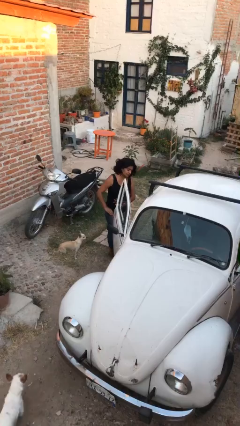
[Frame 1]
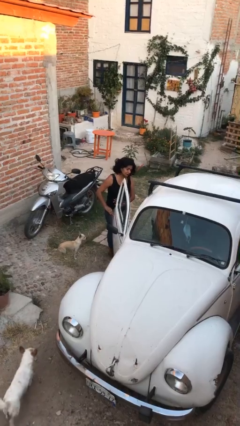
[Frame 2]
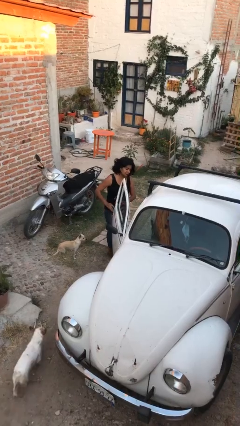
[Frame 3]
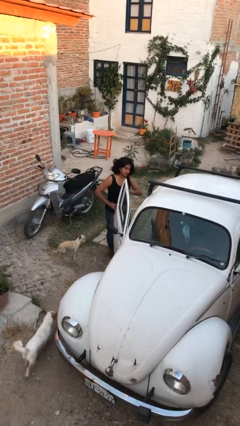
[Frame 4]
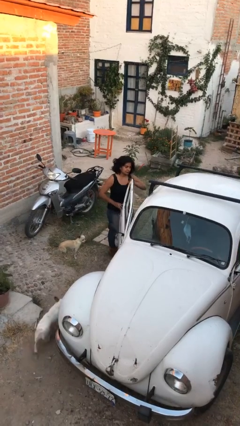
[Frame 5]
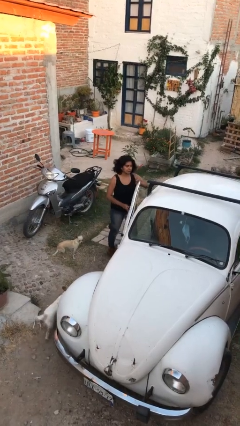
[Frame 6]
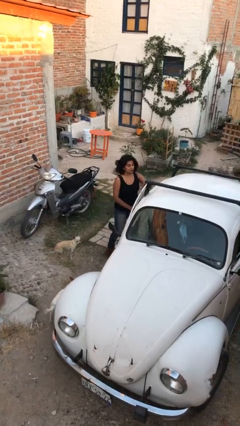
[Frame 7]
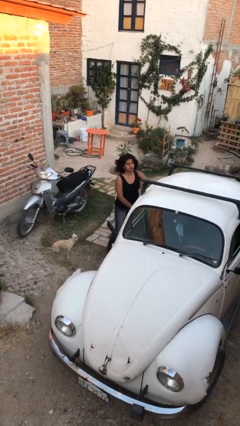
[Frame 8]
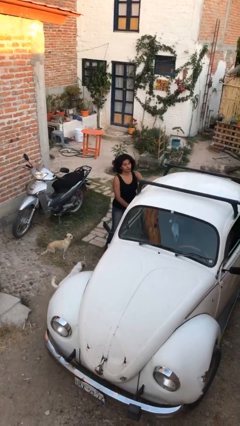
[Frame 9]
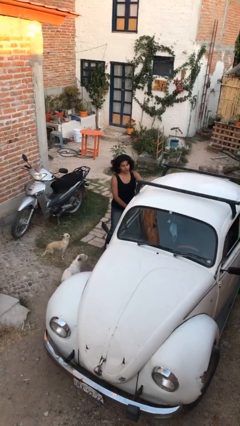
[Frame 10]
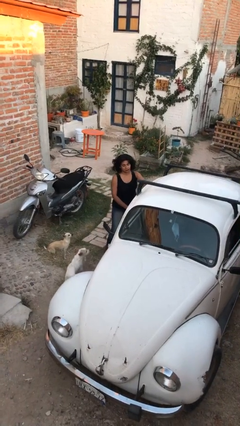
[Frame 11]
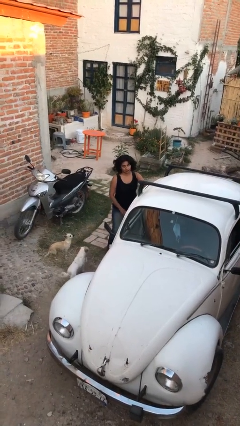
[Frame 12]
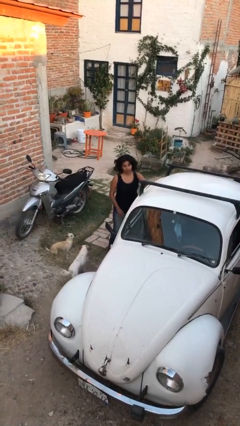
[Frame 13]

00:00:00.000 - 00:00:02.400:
person closes car door

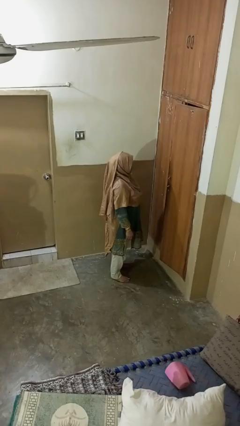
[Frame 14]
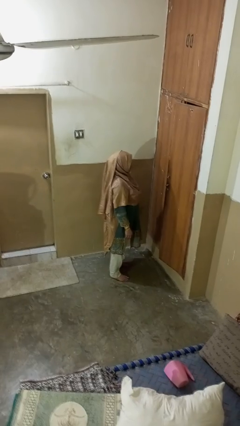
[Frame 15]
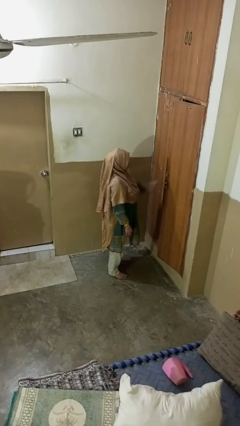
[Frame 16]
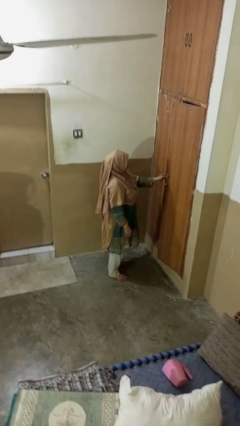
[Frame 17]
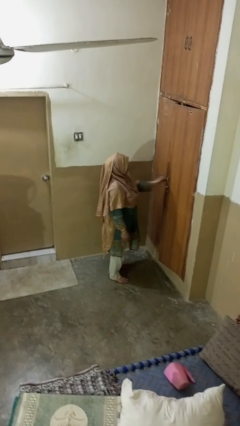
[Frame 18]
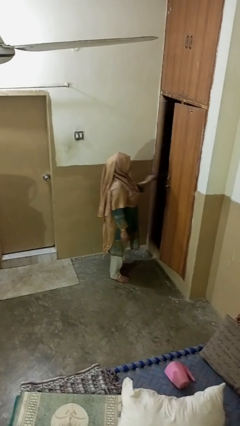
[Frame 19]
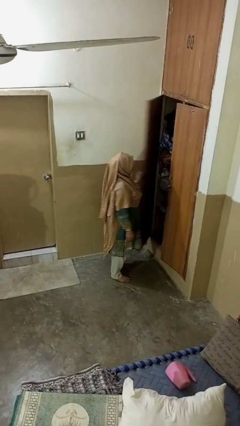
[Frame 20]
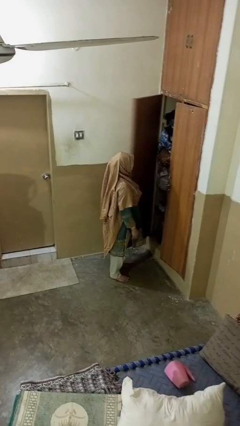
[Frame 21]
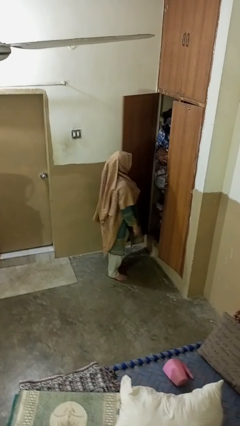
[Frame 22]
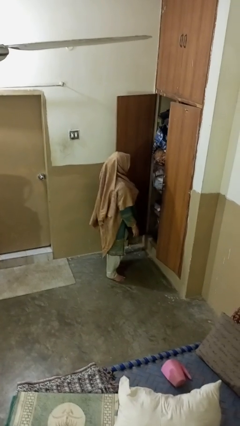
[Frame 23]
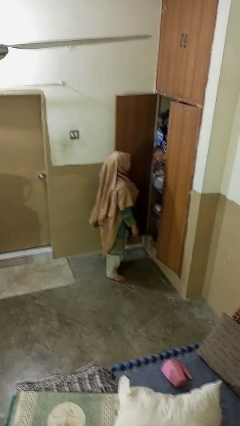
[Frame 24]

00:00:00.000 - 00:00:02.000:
person opens closet door

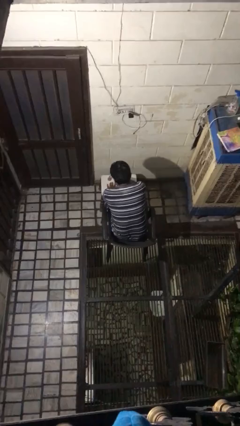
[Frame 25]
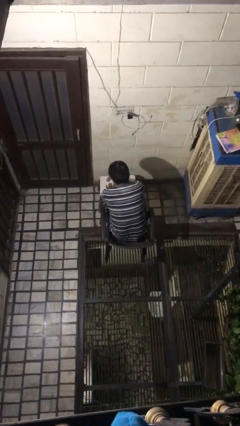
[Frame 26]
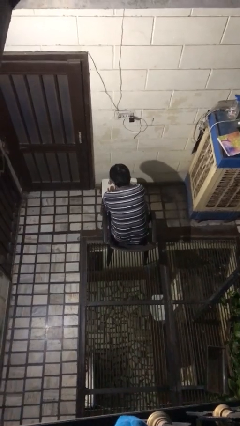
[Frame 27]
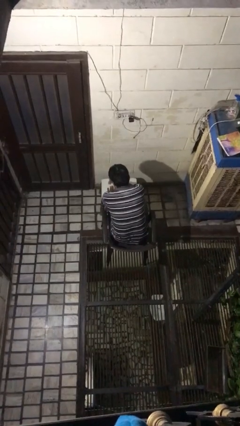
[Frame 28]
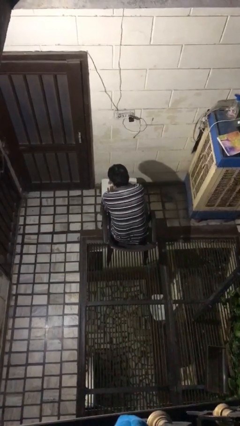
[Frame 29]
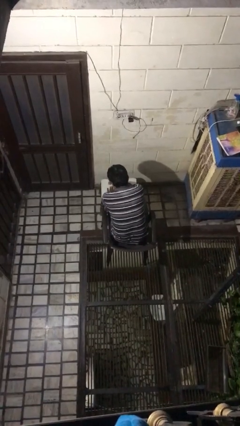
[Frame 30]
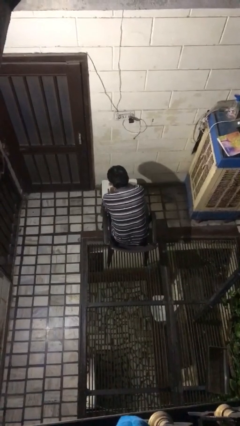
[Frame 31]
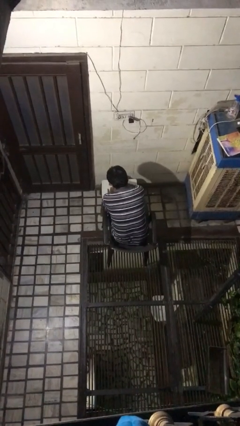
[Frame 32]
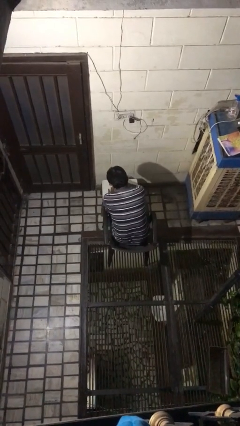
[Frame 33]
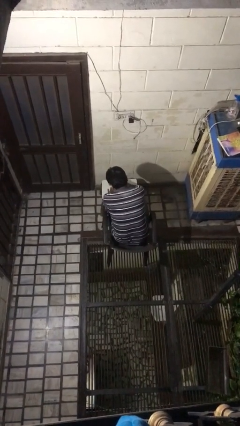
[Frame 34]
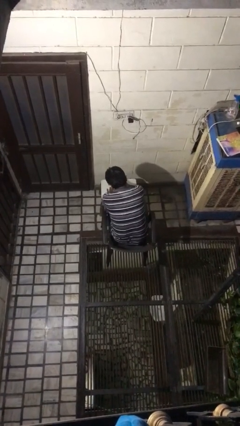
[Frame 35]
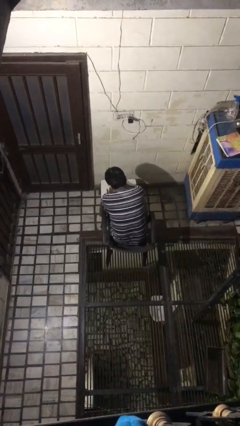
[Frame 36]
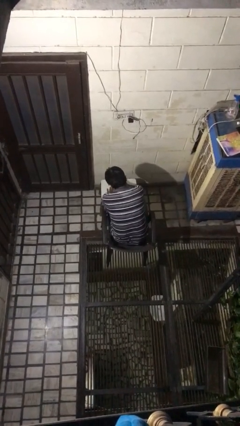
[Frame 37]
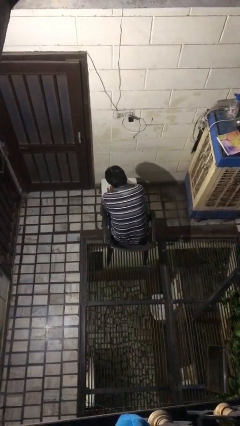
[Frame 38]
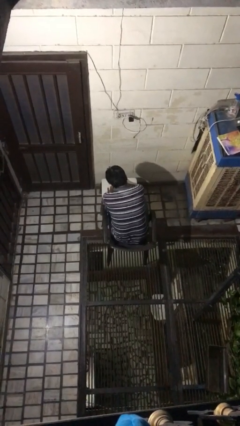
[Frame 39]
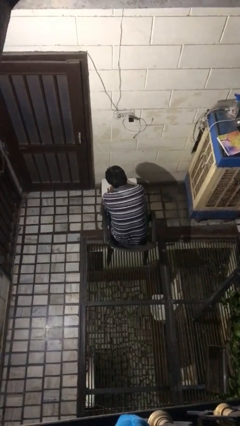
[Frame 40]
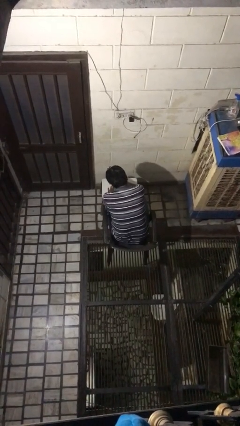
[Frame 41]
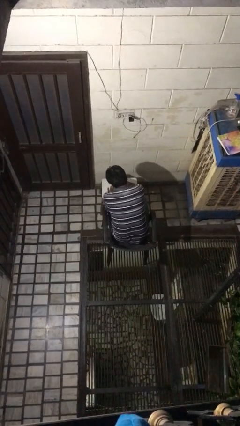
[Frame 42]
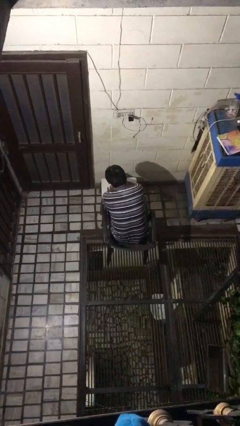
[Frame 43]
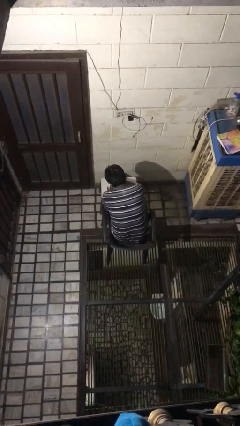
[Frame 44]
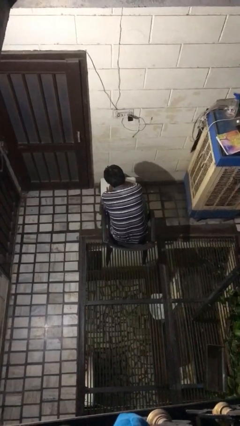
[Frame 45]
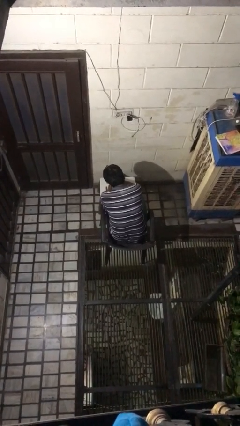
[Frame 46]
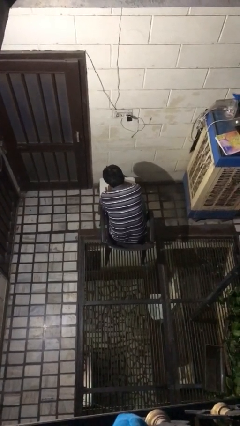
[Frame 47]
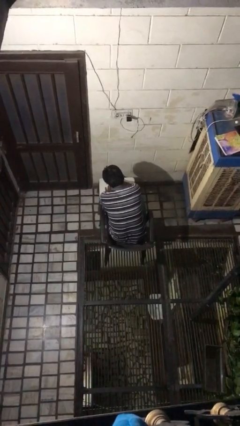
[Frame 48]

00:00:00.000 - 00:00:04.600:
person paints fingernails

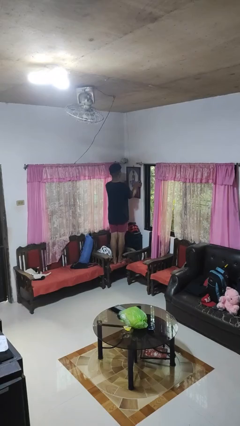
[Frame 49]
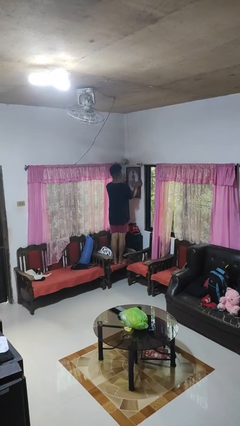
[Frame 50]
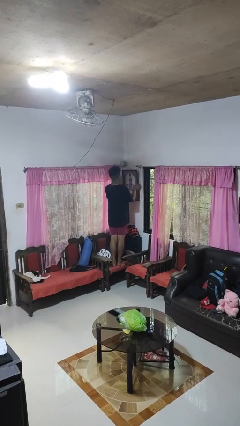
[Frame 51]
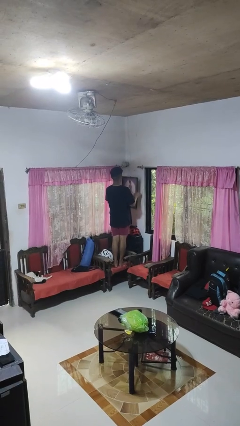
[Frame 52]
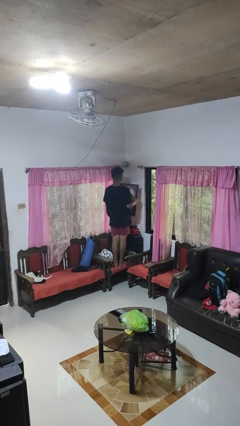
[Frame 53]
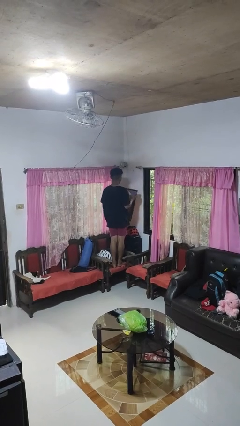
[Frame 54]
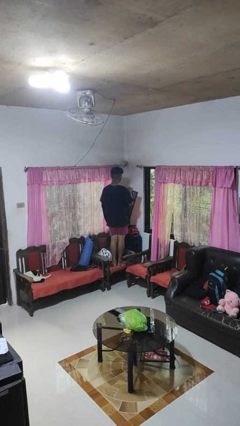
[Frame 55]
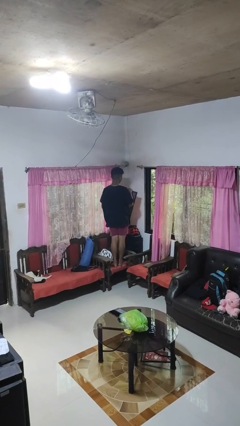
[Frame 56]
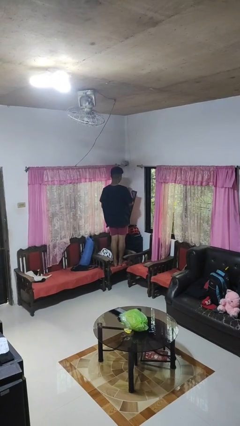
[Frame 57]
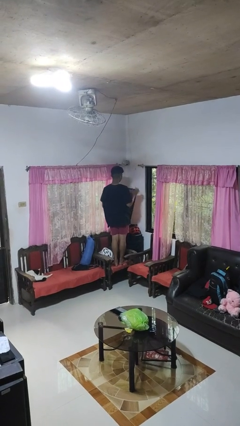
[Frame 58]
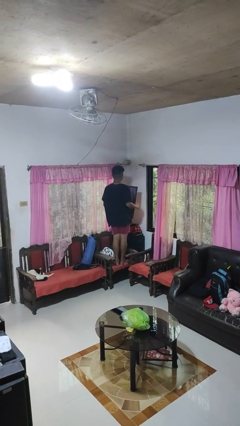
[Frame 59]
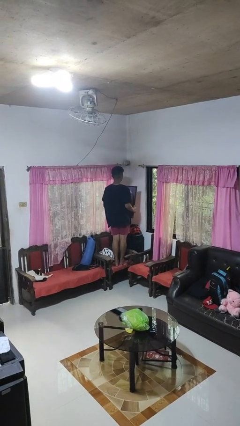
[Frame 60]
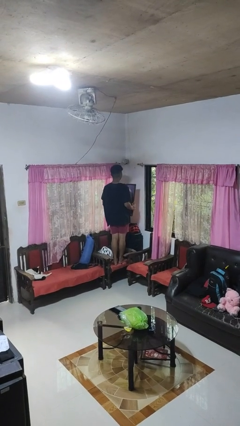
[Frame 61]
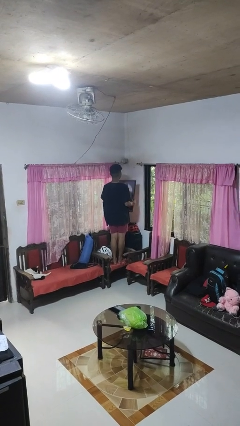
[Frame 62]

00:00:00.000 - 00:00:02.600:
person takes down picture frame

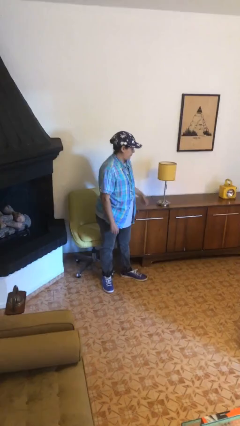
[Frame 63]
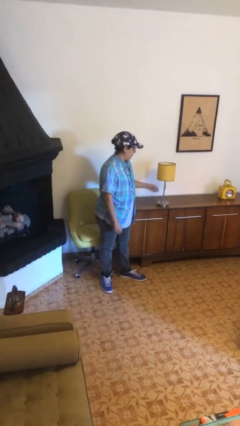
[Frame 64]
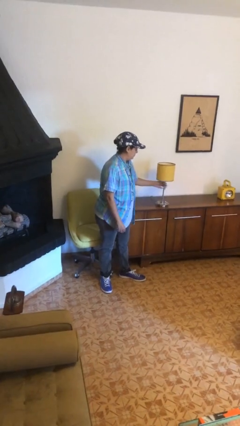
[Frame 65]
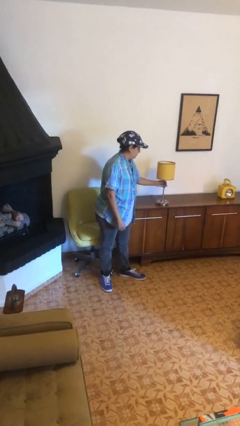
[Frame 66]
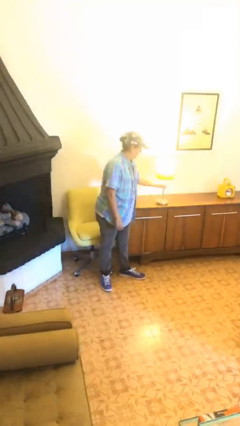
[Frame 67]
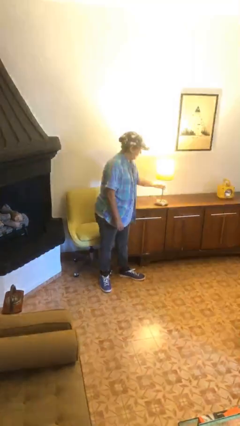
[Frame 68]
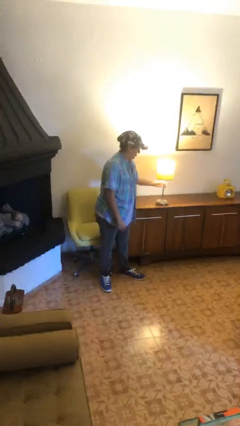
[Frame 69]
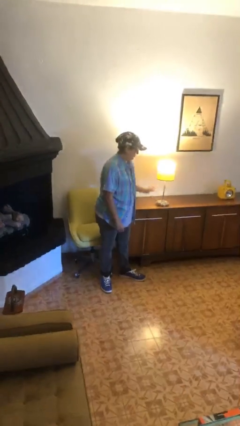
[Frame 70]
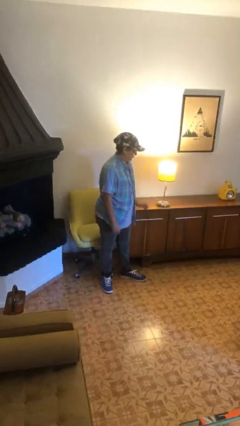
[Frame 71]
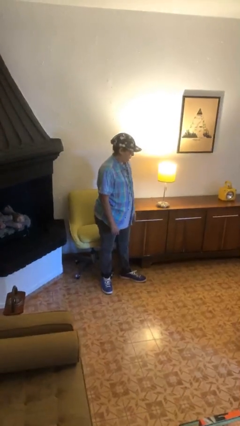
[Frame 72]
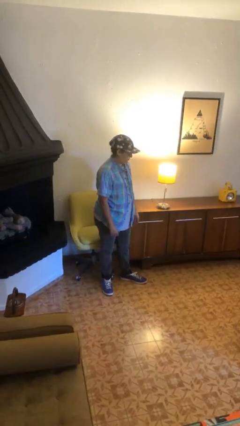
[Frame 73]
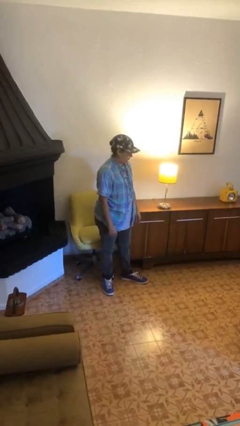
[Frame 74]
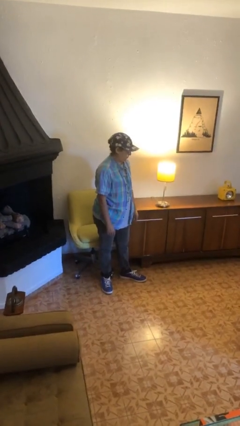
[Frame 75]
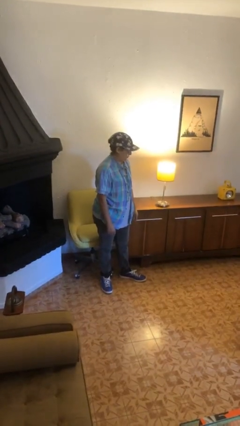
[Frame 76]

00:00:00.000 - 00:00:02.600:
person turns on lamp

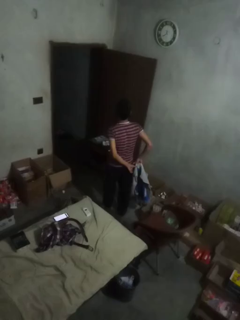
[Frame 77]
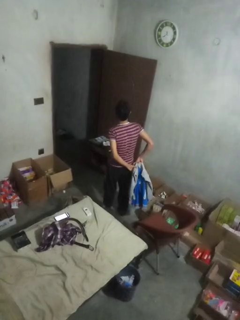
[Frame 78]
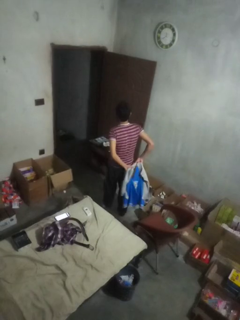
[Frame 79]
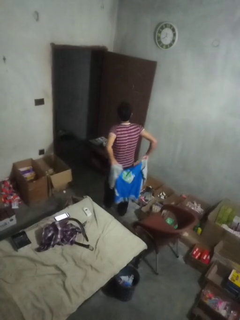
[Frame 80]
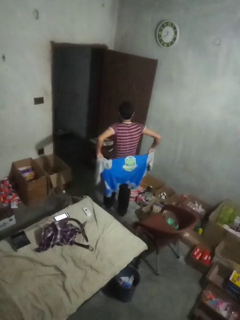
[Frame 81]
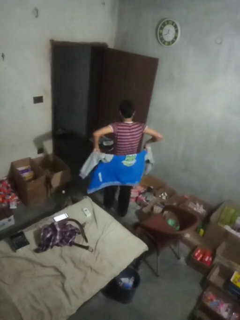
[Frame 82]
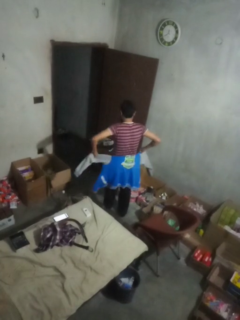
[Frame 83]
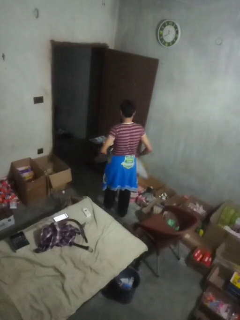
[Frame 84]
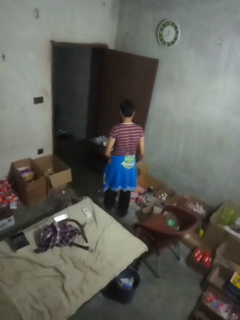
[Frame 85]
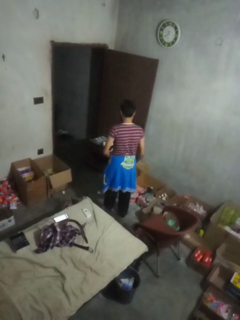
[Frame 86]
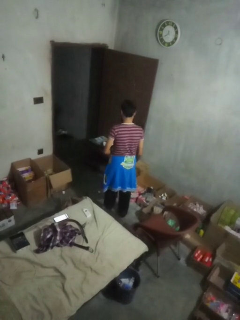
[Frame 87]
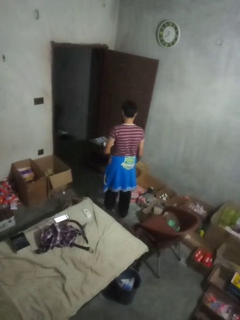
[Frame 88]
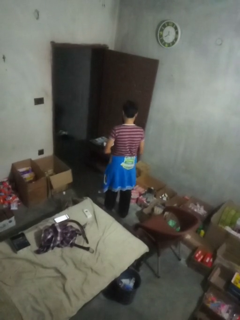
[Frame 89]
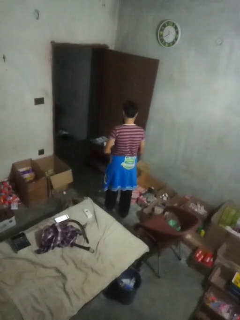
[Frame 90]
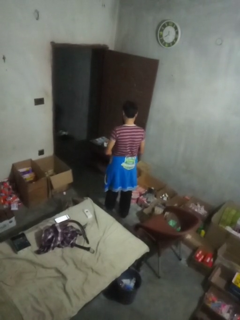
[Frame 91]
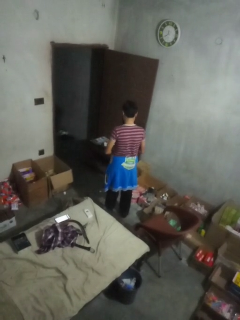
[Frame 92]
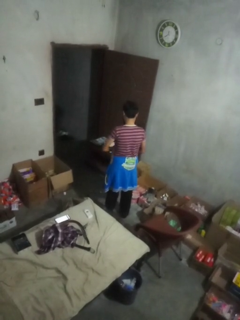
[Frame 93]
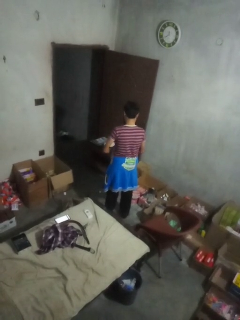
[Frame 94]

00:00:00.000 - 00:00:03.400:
person ties jacket around waist
